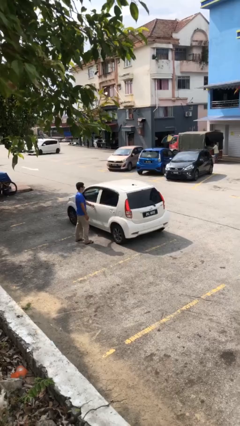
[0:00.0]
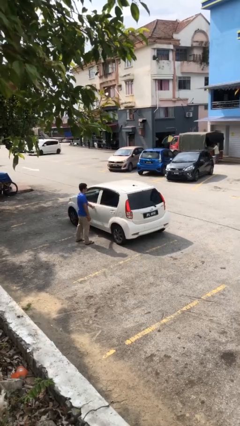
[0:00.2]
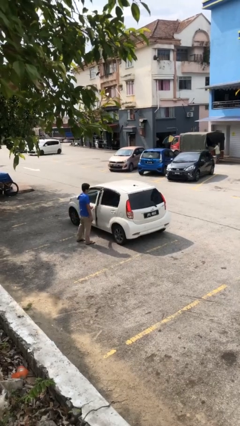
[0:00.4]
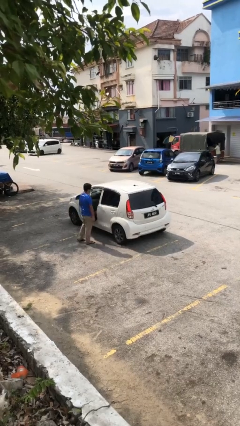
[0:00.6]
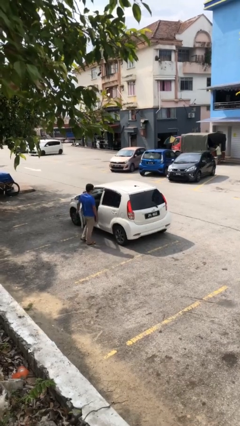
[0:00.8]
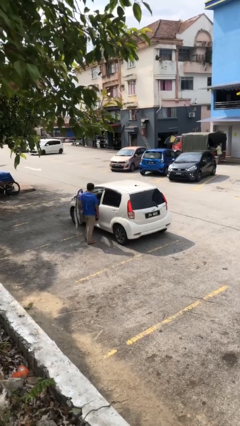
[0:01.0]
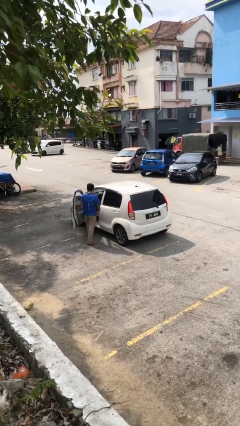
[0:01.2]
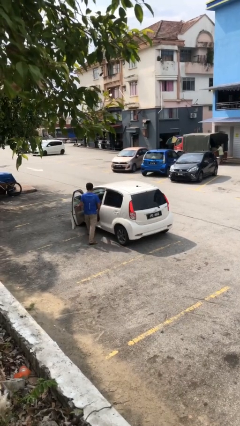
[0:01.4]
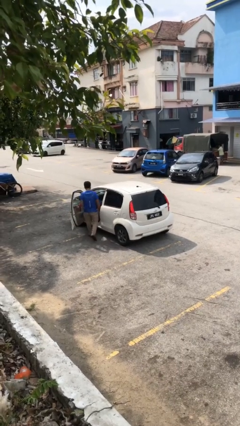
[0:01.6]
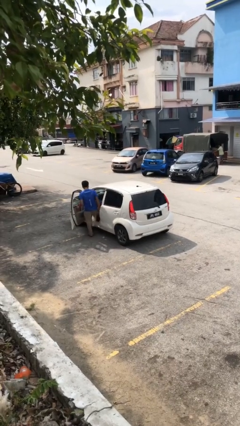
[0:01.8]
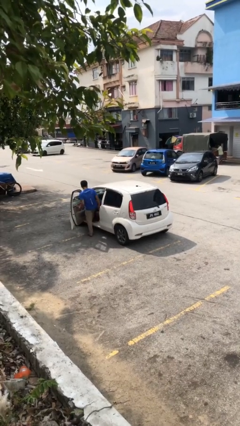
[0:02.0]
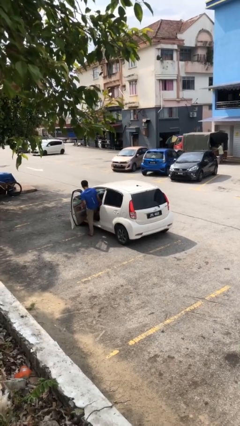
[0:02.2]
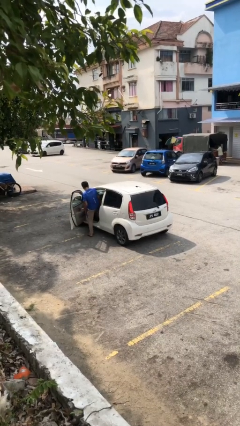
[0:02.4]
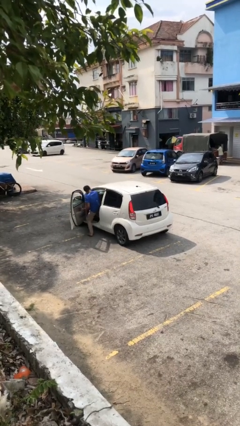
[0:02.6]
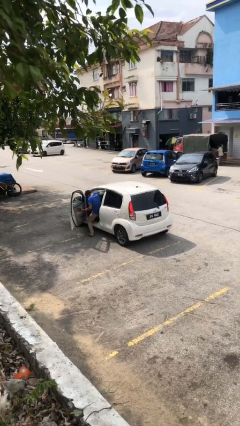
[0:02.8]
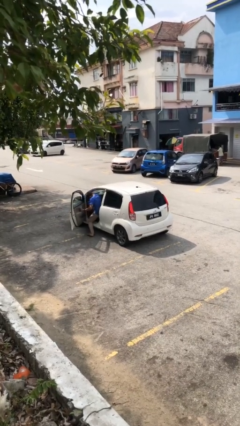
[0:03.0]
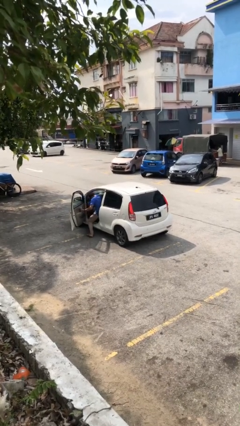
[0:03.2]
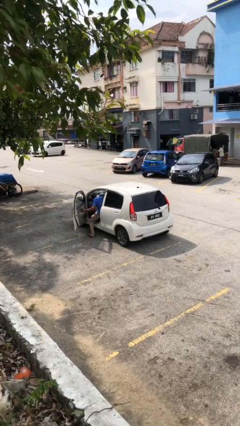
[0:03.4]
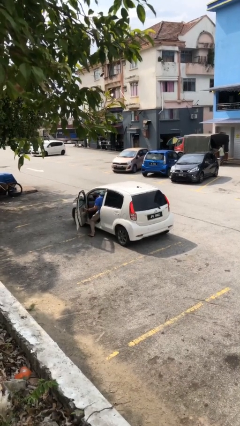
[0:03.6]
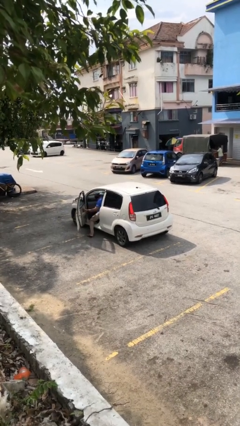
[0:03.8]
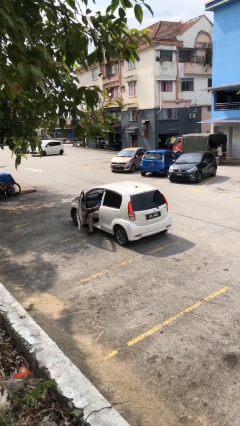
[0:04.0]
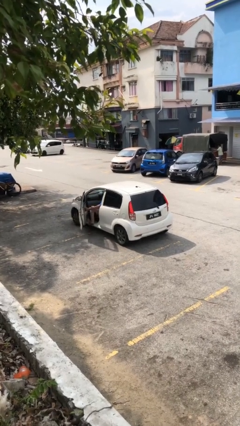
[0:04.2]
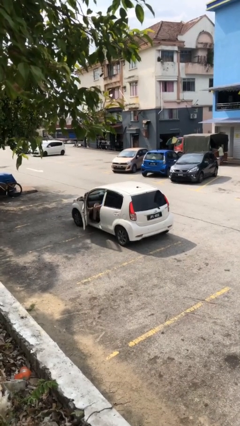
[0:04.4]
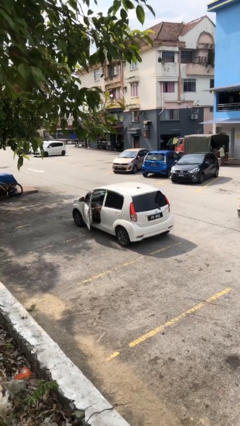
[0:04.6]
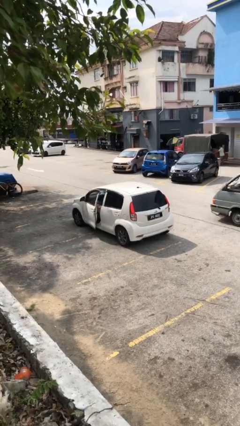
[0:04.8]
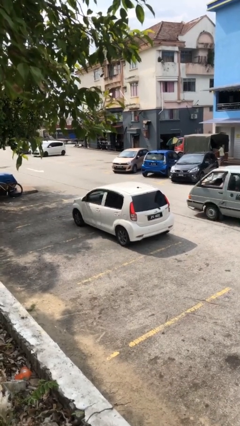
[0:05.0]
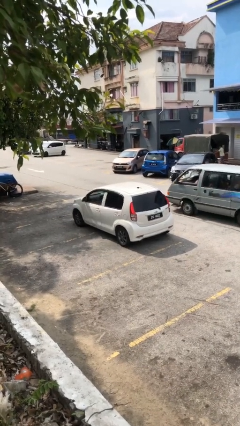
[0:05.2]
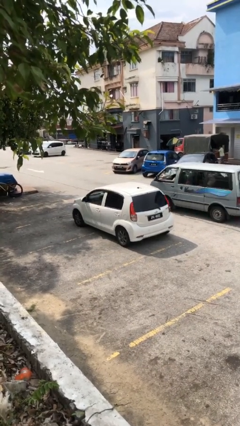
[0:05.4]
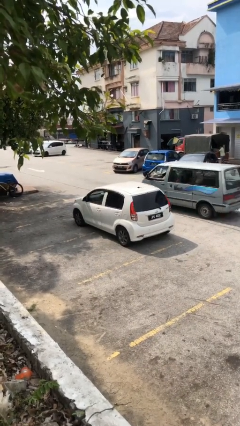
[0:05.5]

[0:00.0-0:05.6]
car picks up person

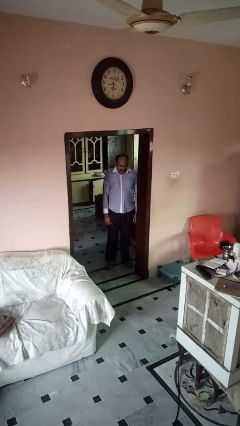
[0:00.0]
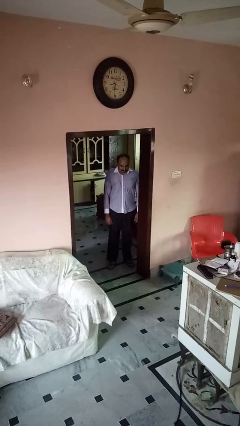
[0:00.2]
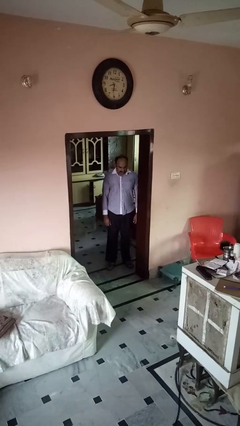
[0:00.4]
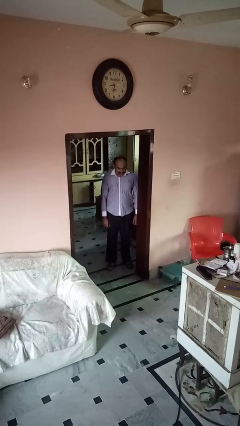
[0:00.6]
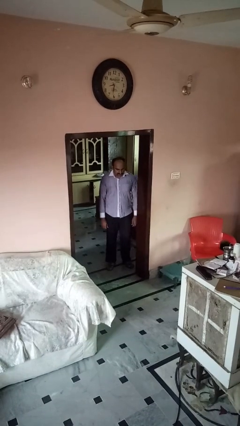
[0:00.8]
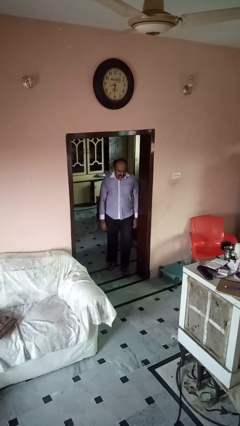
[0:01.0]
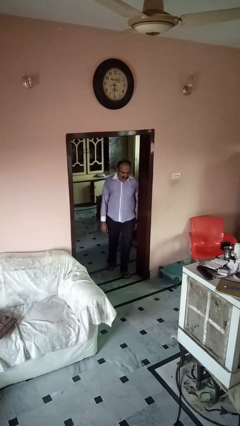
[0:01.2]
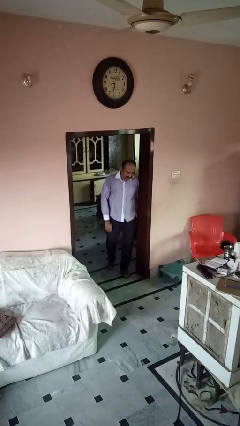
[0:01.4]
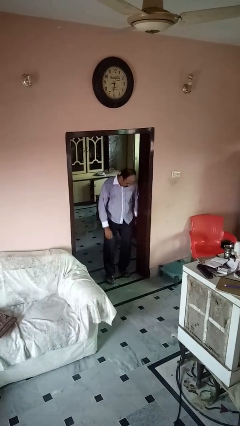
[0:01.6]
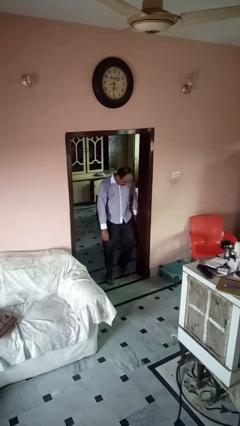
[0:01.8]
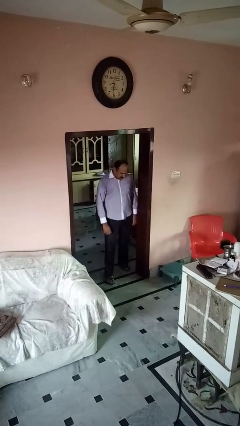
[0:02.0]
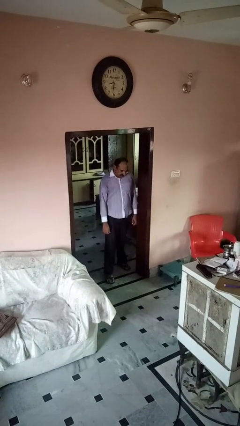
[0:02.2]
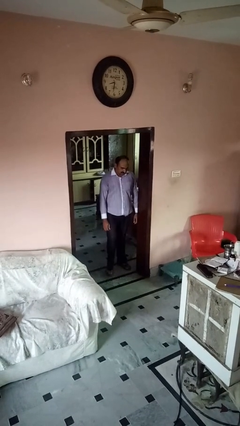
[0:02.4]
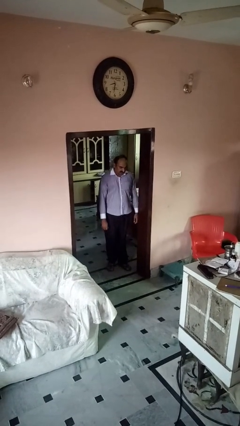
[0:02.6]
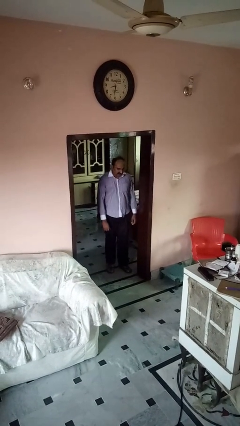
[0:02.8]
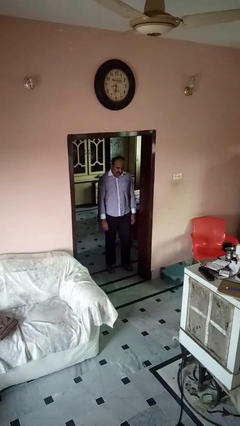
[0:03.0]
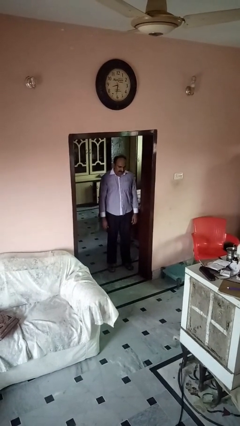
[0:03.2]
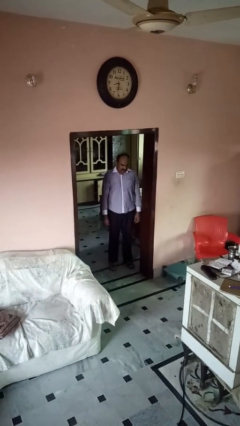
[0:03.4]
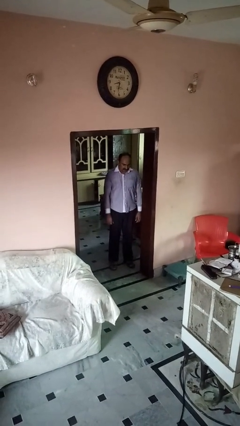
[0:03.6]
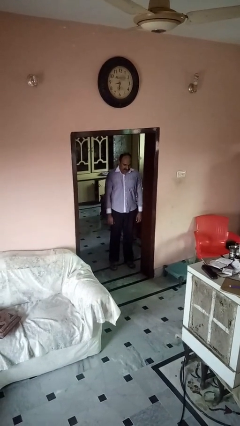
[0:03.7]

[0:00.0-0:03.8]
person bumps into wall

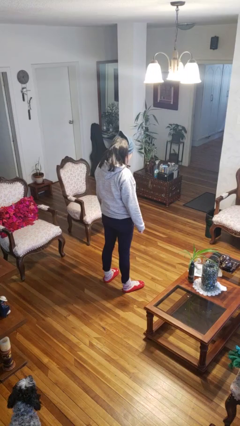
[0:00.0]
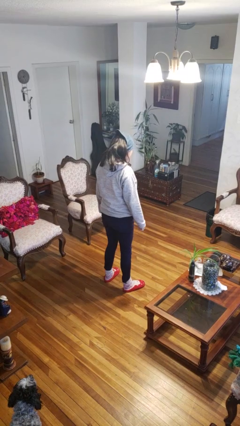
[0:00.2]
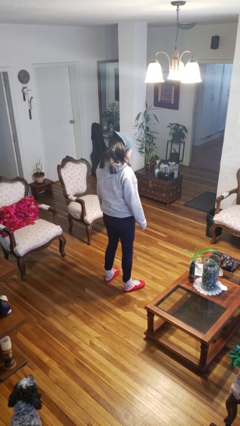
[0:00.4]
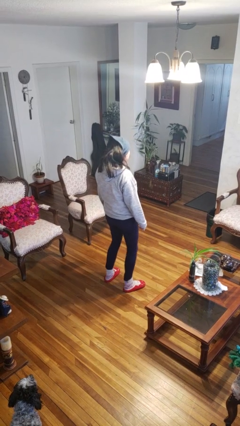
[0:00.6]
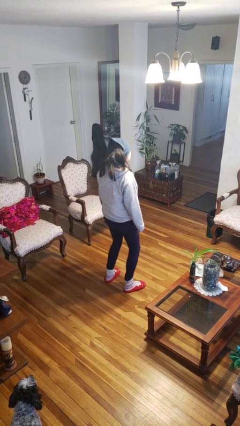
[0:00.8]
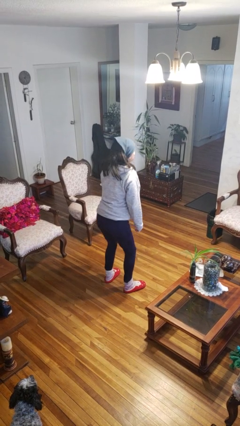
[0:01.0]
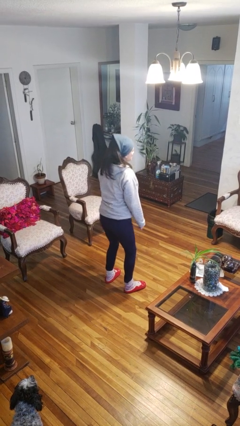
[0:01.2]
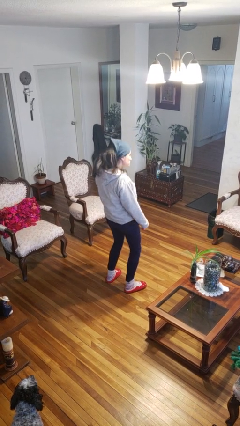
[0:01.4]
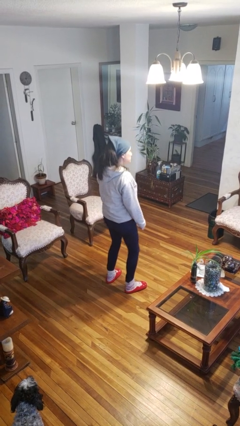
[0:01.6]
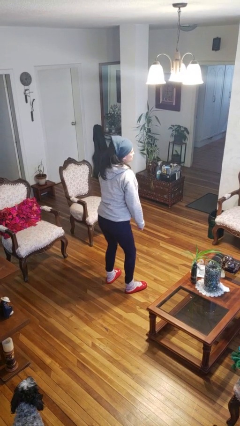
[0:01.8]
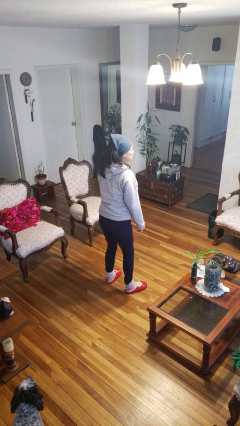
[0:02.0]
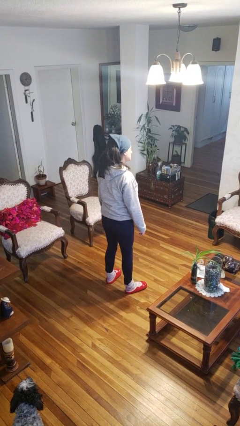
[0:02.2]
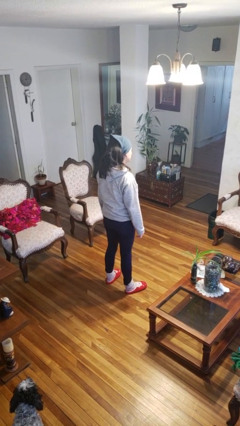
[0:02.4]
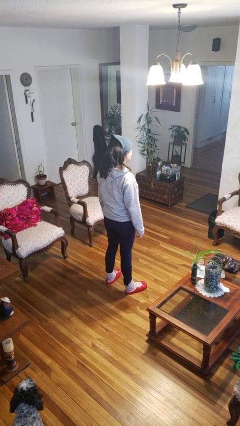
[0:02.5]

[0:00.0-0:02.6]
person wiggles hips

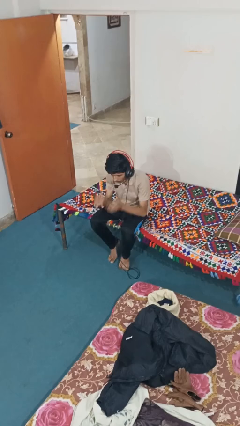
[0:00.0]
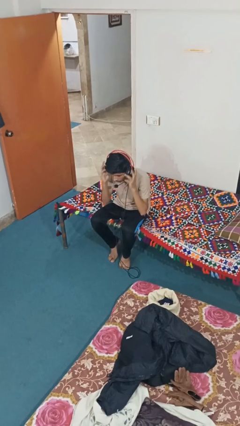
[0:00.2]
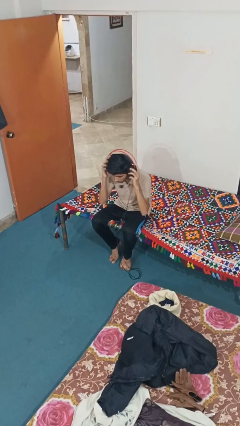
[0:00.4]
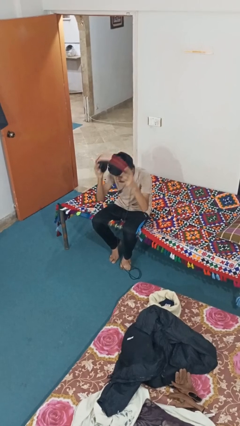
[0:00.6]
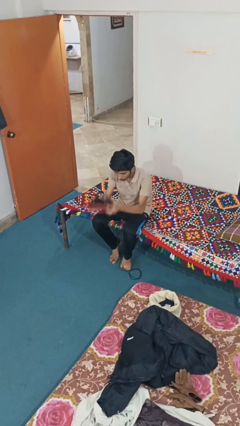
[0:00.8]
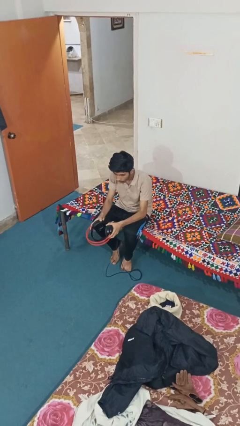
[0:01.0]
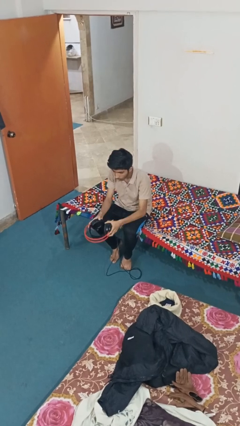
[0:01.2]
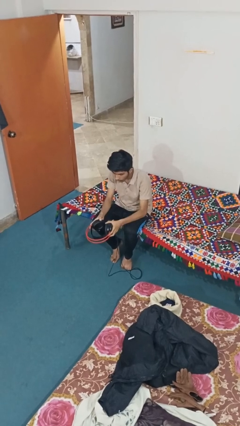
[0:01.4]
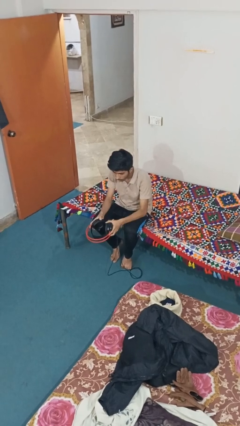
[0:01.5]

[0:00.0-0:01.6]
person takes off headphones

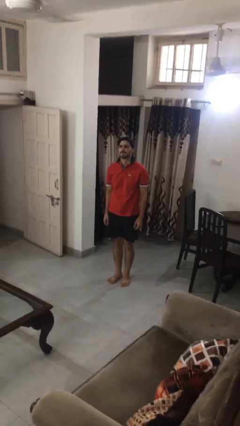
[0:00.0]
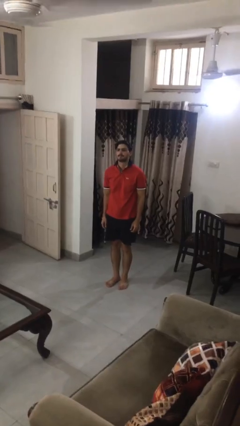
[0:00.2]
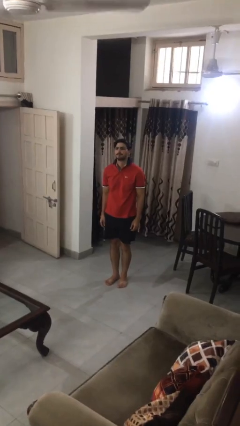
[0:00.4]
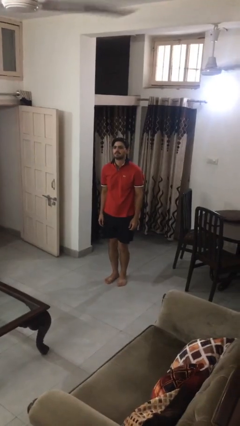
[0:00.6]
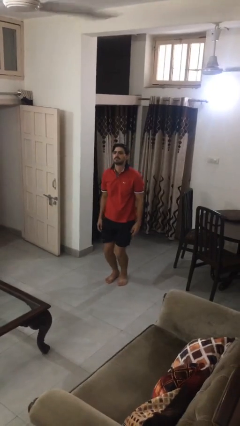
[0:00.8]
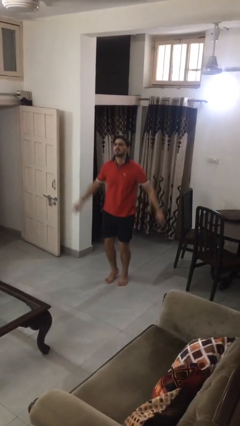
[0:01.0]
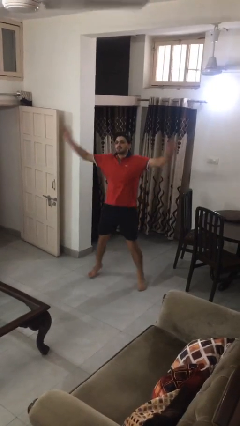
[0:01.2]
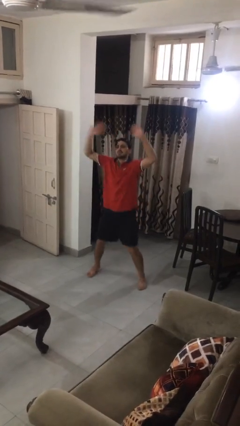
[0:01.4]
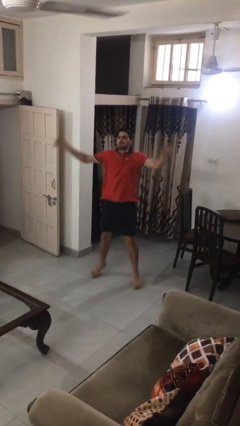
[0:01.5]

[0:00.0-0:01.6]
person exercises with jumping jacks

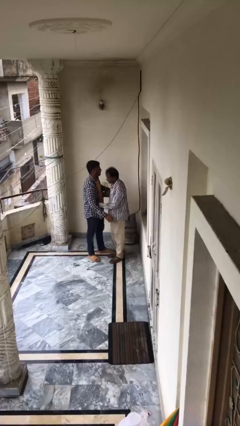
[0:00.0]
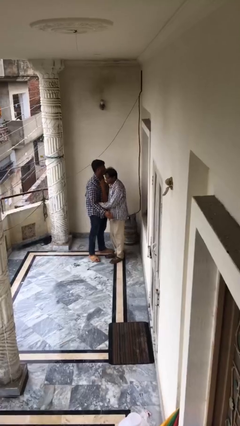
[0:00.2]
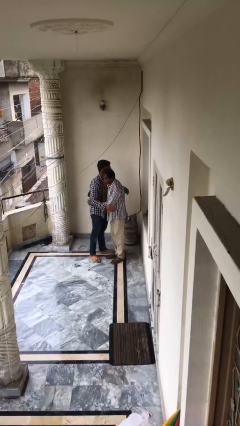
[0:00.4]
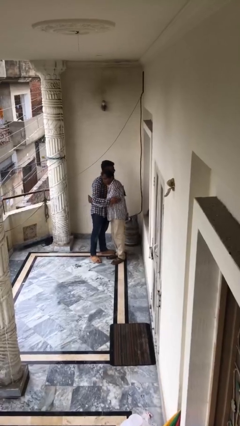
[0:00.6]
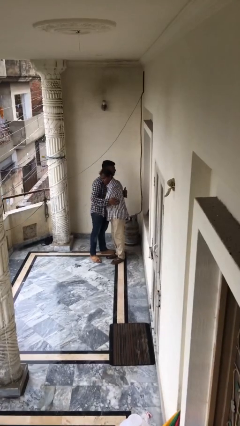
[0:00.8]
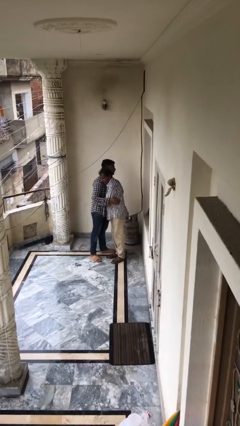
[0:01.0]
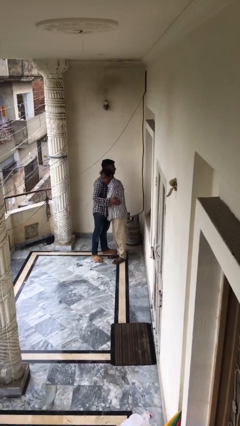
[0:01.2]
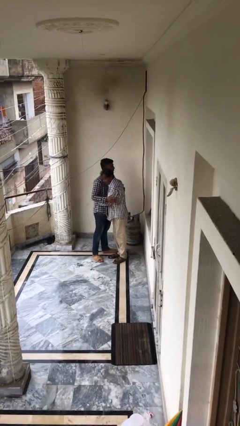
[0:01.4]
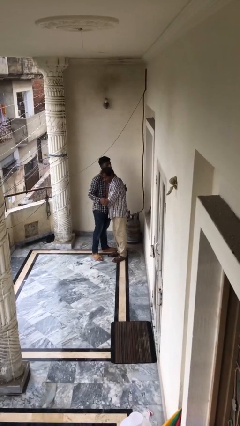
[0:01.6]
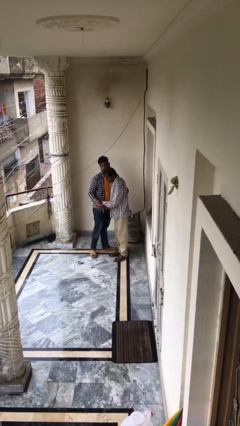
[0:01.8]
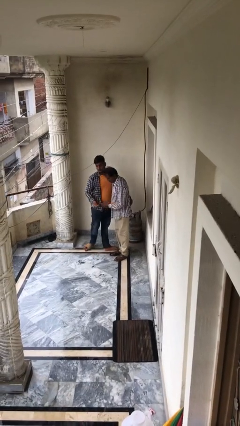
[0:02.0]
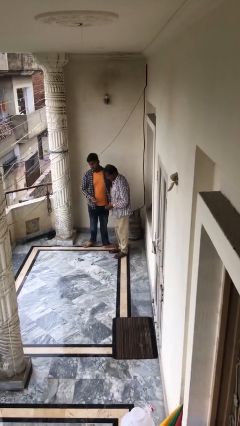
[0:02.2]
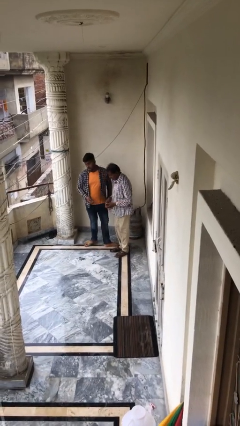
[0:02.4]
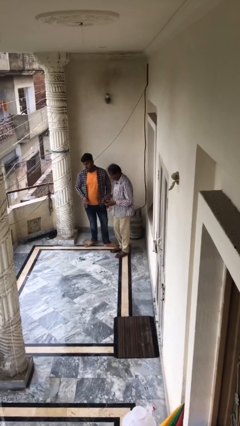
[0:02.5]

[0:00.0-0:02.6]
person embraces person
